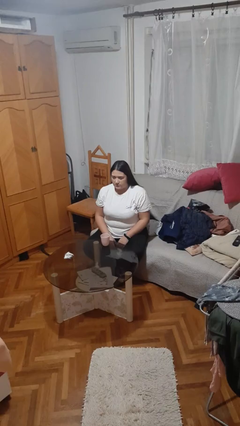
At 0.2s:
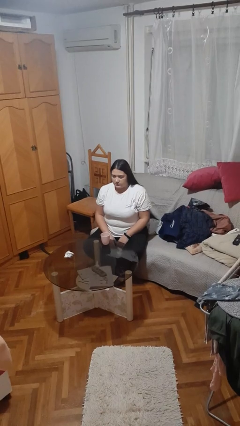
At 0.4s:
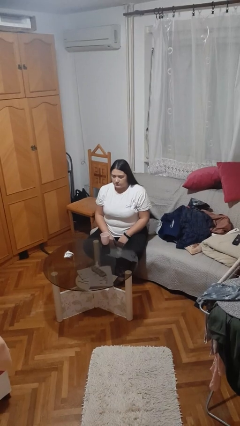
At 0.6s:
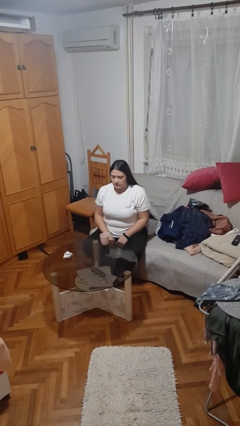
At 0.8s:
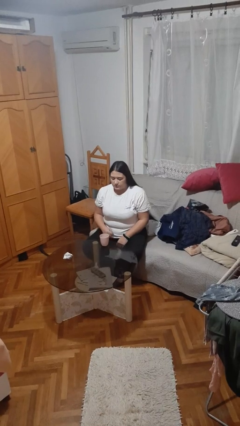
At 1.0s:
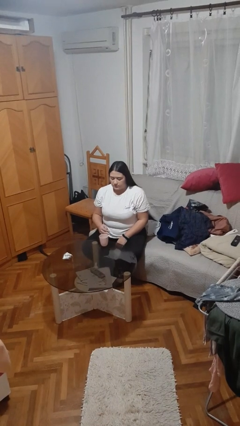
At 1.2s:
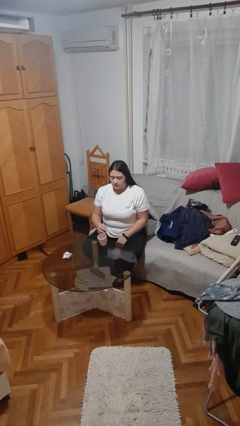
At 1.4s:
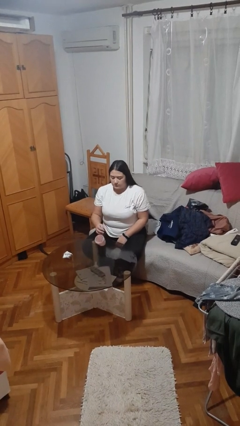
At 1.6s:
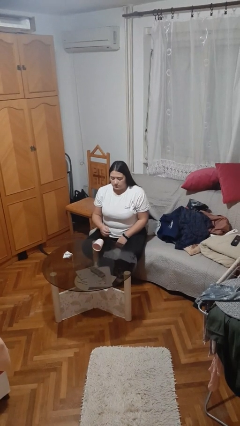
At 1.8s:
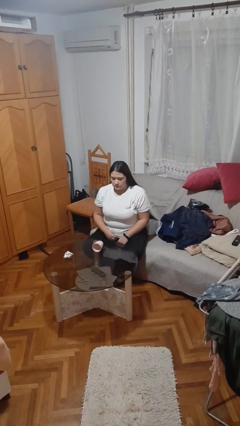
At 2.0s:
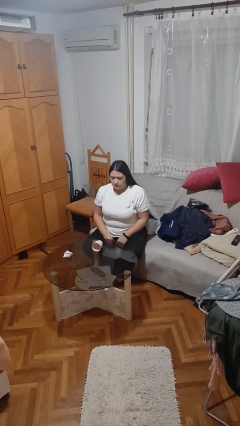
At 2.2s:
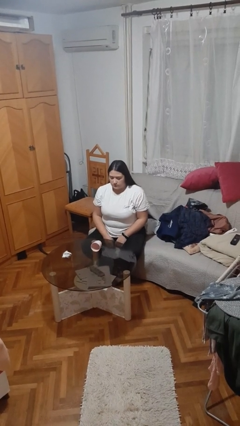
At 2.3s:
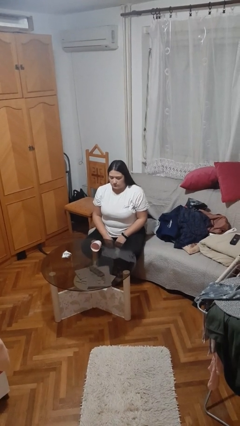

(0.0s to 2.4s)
person spills on table

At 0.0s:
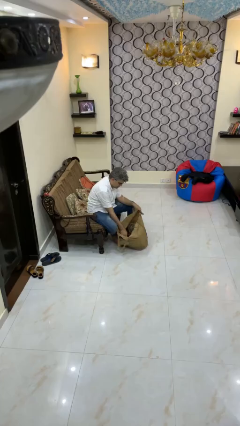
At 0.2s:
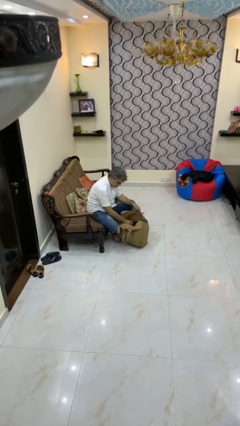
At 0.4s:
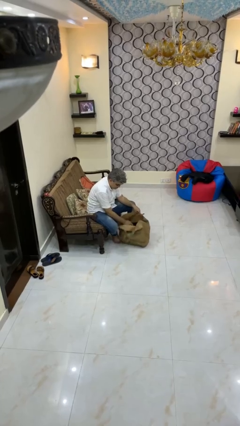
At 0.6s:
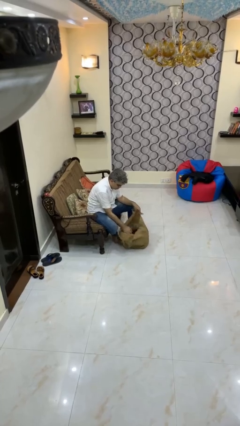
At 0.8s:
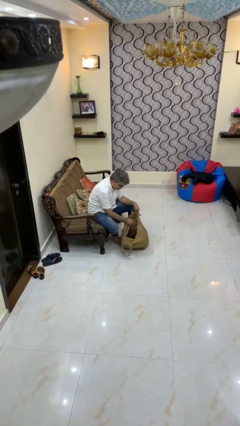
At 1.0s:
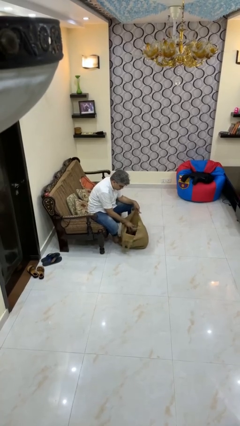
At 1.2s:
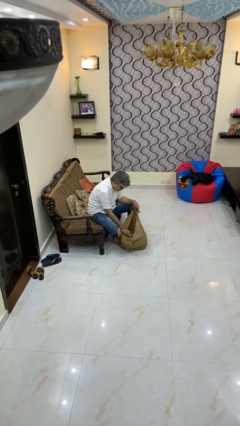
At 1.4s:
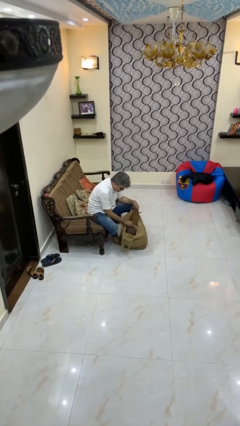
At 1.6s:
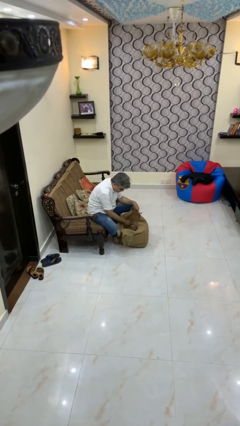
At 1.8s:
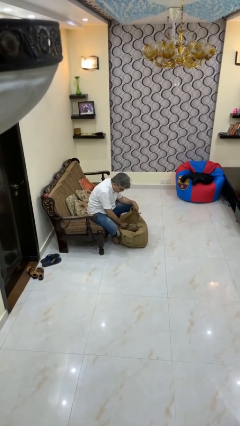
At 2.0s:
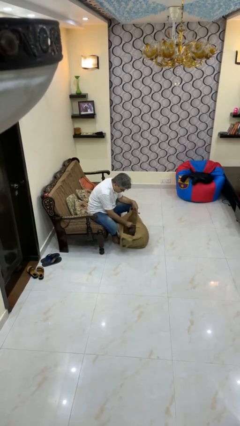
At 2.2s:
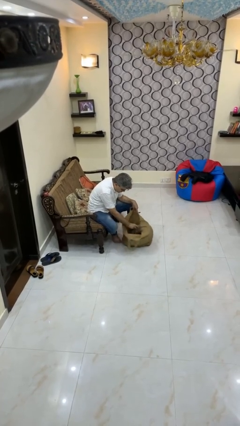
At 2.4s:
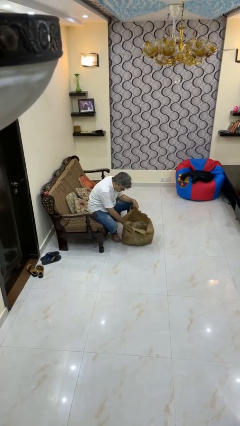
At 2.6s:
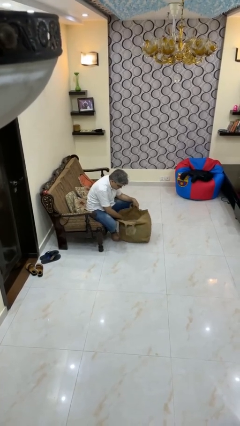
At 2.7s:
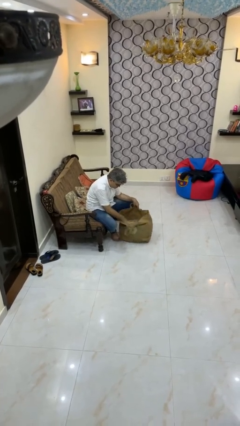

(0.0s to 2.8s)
person searches in bag

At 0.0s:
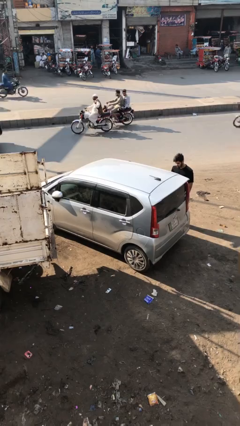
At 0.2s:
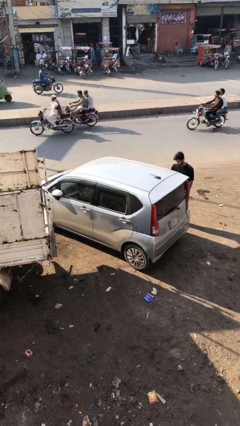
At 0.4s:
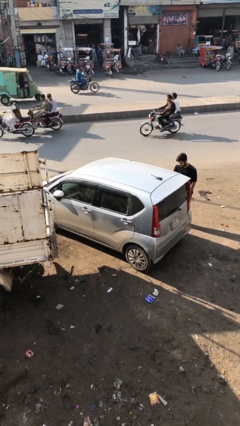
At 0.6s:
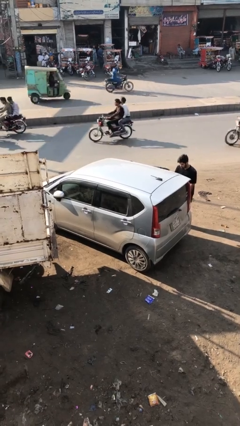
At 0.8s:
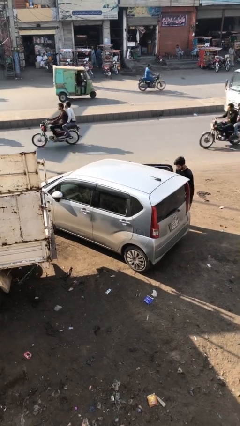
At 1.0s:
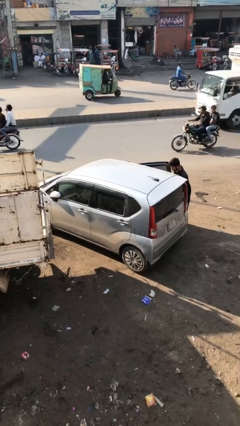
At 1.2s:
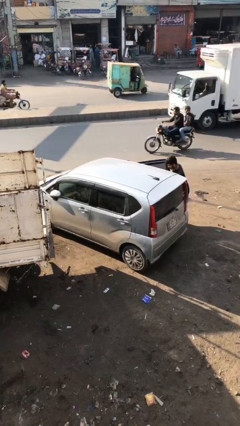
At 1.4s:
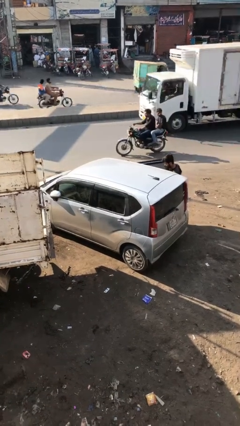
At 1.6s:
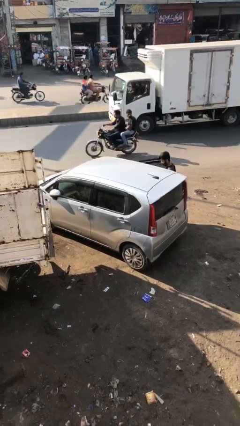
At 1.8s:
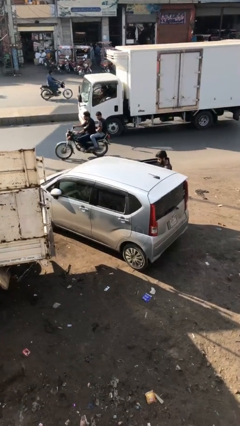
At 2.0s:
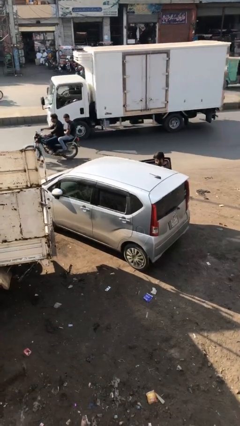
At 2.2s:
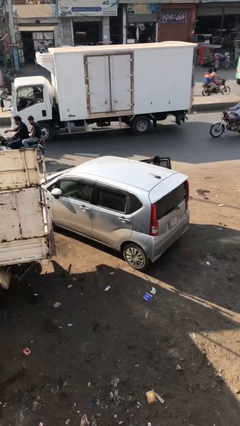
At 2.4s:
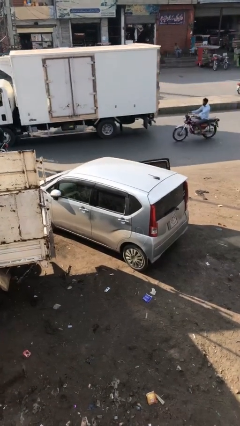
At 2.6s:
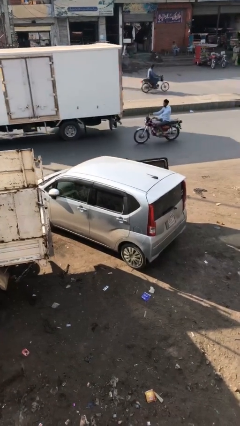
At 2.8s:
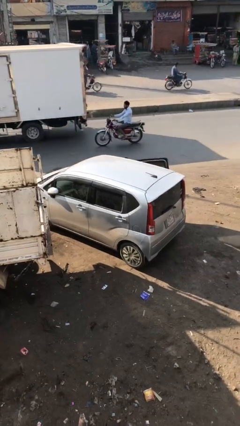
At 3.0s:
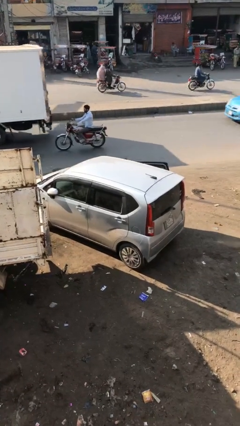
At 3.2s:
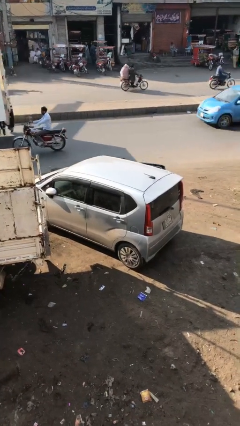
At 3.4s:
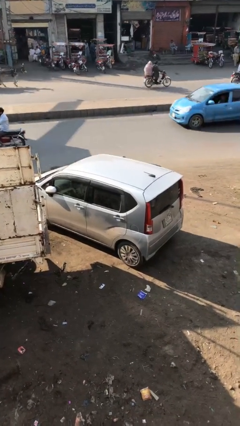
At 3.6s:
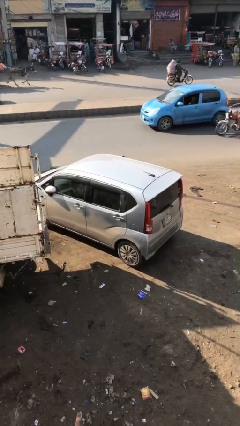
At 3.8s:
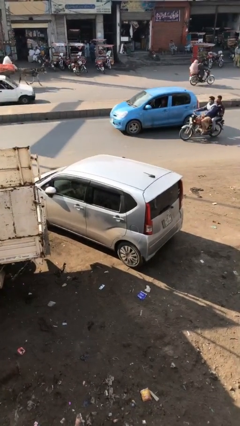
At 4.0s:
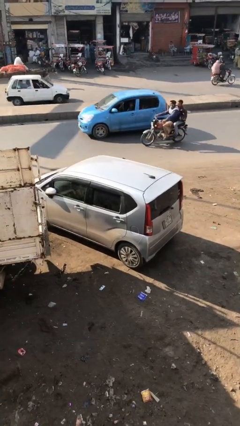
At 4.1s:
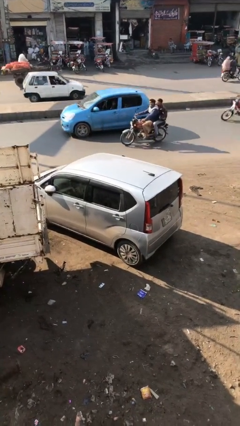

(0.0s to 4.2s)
car picks up person

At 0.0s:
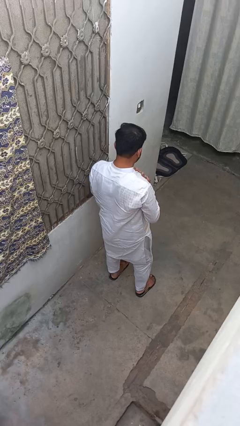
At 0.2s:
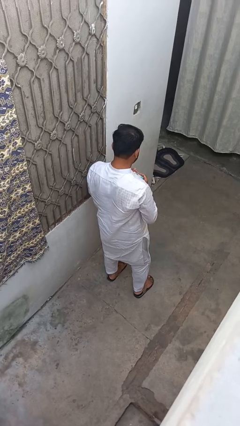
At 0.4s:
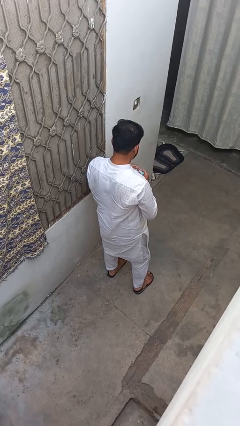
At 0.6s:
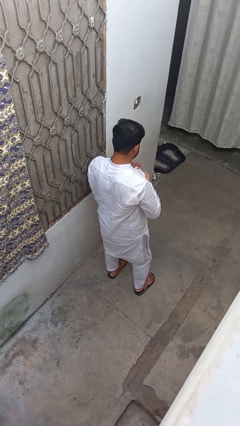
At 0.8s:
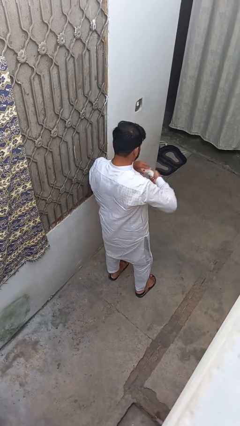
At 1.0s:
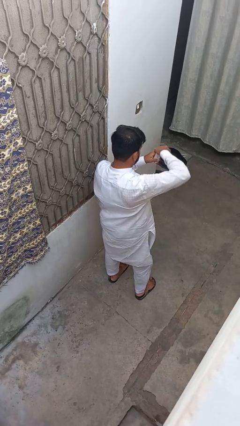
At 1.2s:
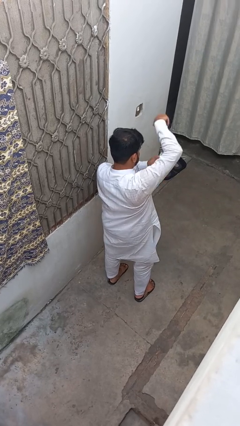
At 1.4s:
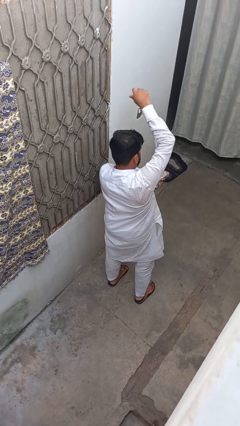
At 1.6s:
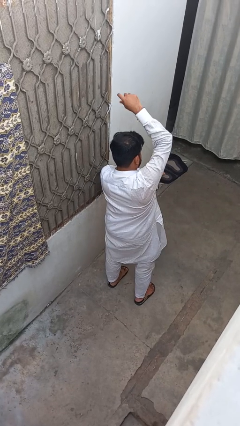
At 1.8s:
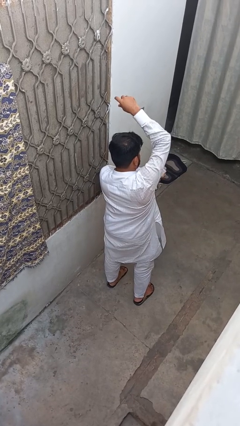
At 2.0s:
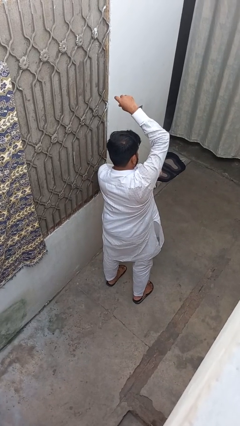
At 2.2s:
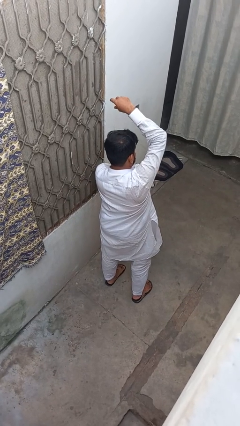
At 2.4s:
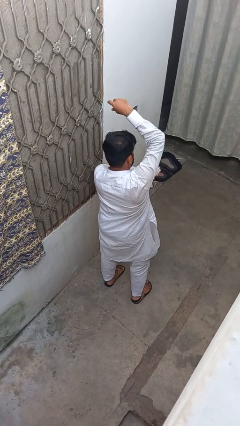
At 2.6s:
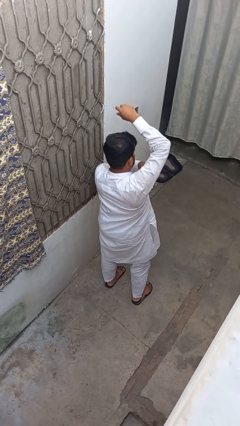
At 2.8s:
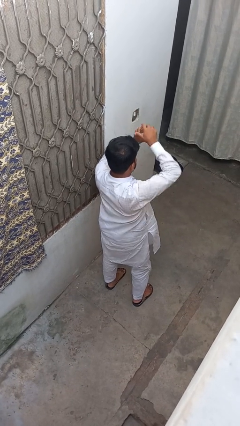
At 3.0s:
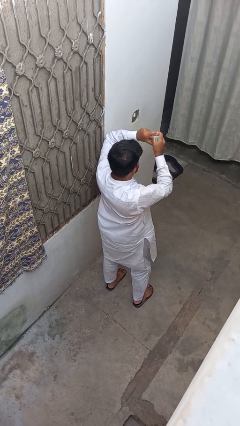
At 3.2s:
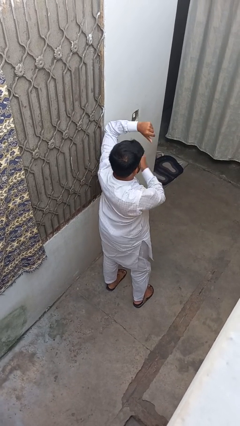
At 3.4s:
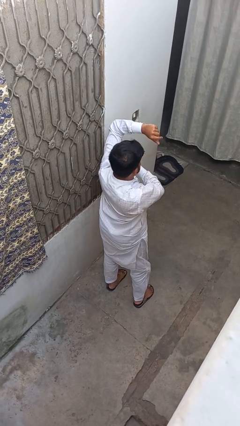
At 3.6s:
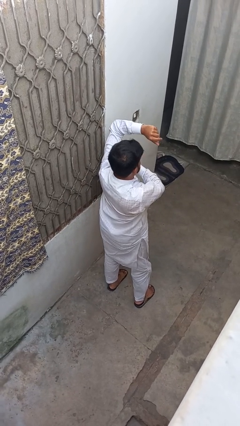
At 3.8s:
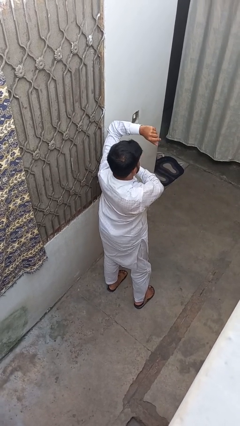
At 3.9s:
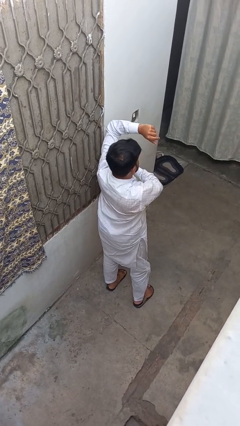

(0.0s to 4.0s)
person applies deodorant

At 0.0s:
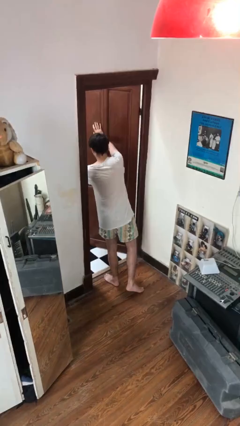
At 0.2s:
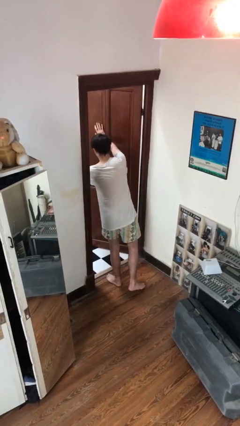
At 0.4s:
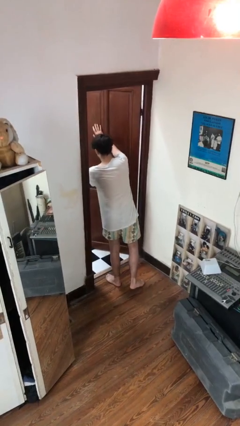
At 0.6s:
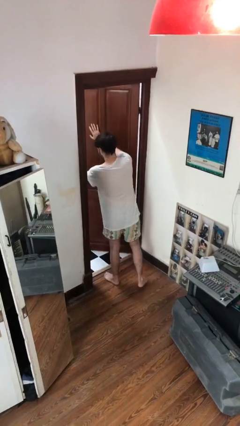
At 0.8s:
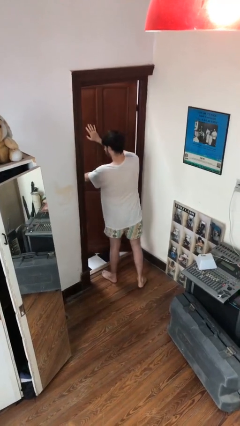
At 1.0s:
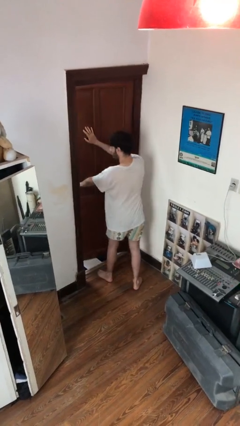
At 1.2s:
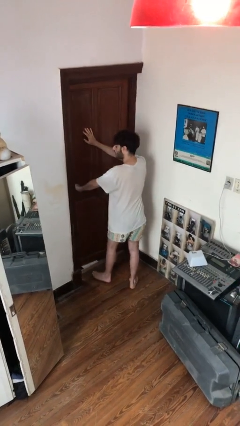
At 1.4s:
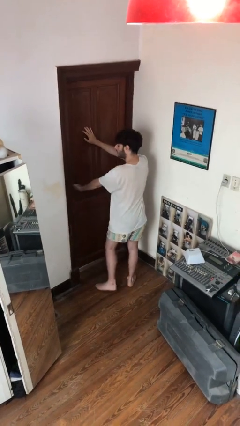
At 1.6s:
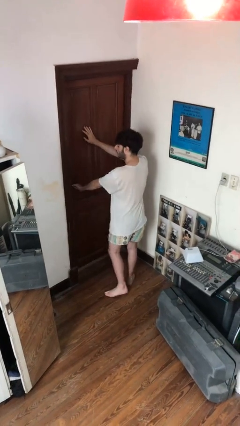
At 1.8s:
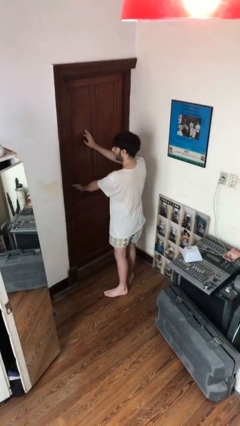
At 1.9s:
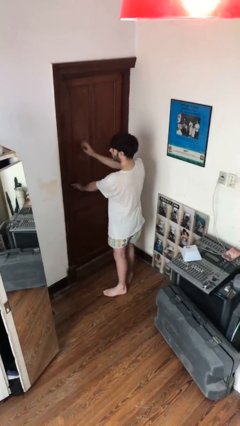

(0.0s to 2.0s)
person closes facility door

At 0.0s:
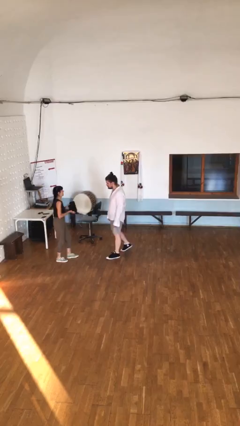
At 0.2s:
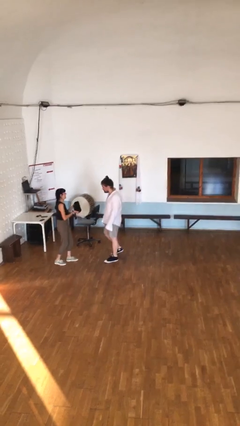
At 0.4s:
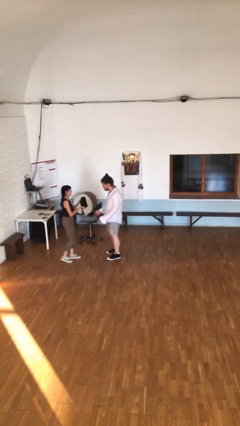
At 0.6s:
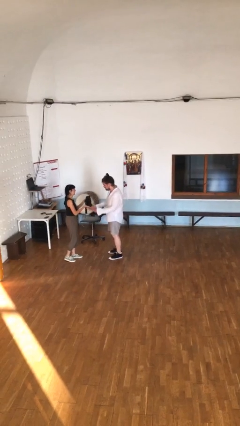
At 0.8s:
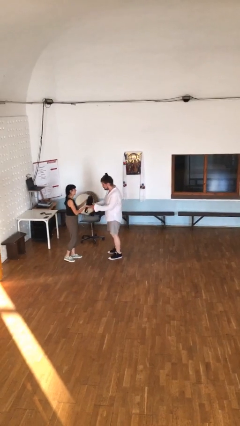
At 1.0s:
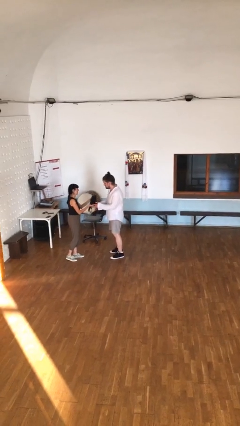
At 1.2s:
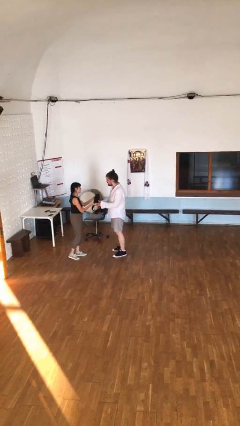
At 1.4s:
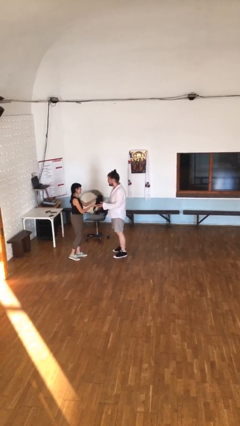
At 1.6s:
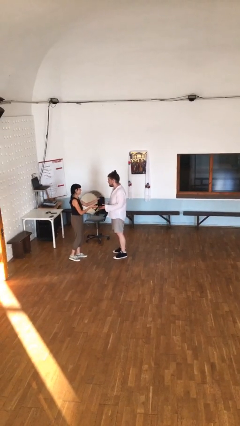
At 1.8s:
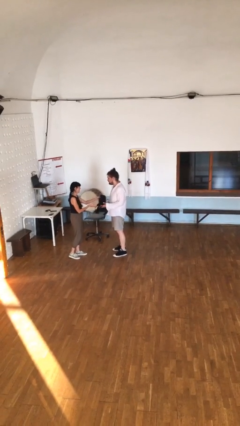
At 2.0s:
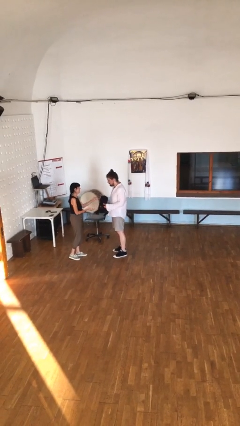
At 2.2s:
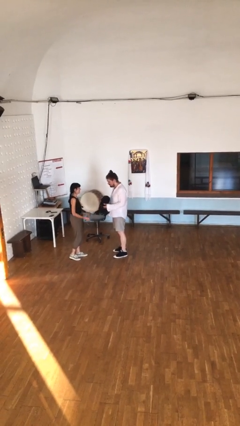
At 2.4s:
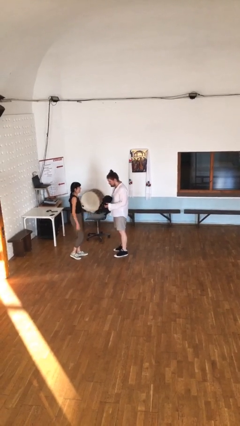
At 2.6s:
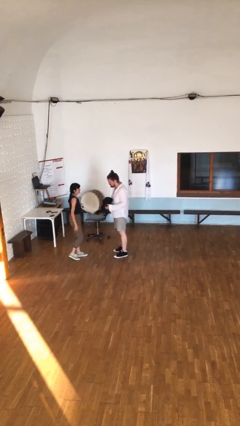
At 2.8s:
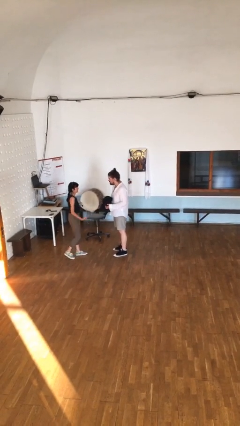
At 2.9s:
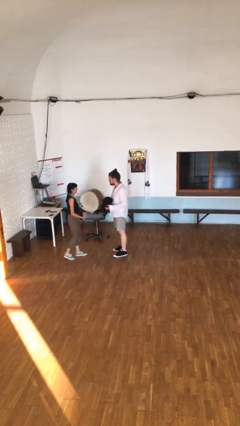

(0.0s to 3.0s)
person transfers object to person
